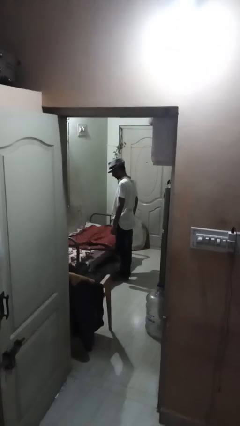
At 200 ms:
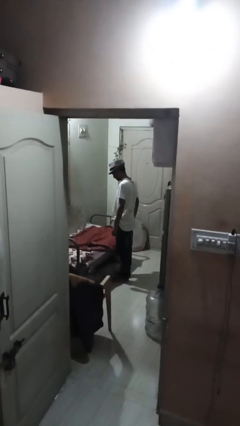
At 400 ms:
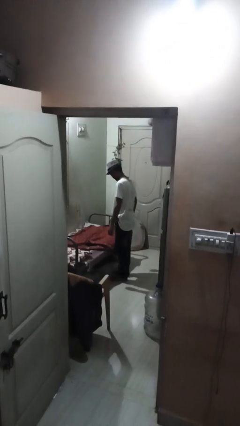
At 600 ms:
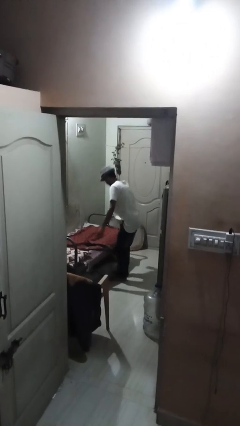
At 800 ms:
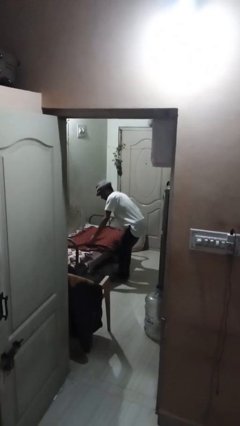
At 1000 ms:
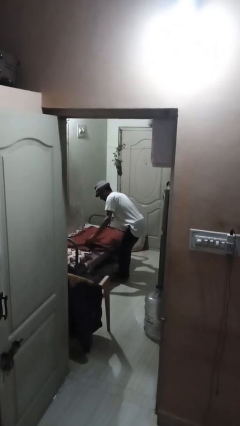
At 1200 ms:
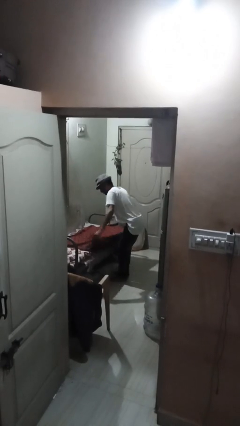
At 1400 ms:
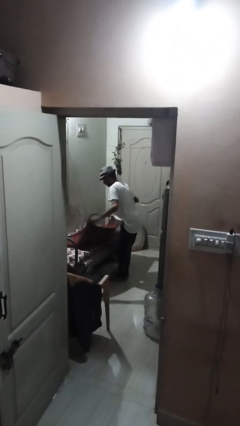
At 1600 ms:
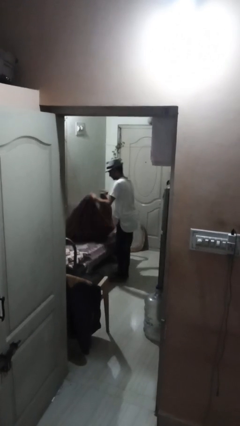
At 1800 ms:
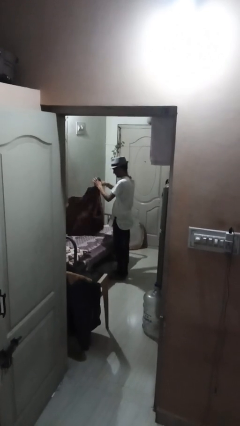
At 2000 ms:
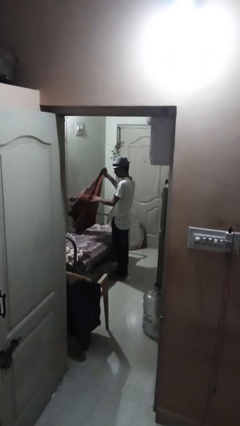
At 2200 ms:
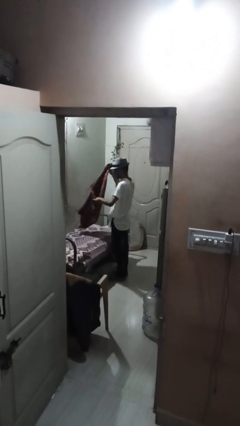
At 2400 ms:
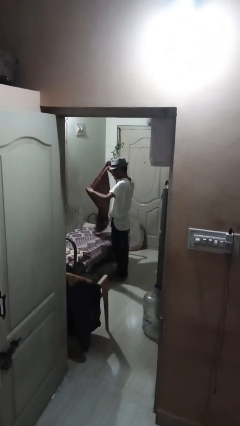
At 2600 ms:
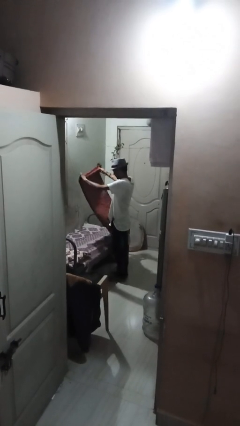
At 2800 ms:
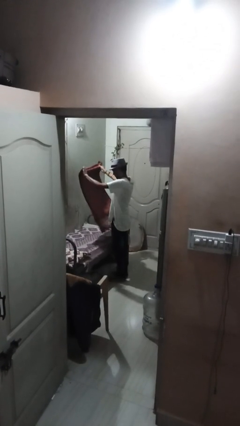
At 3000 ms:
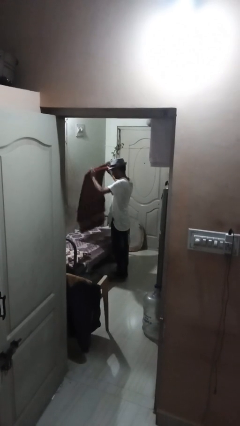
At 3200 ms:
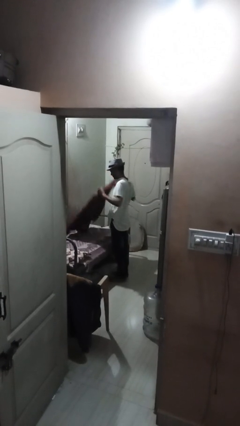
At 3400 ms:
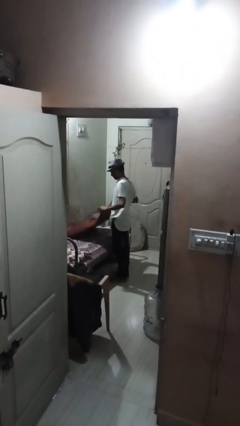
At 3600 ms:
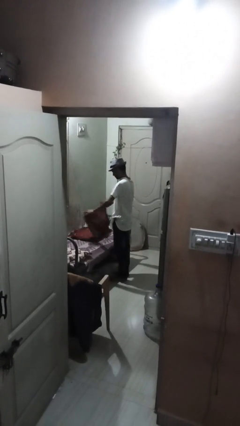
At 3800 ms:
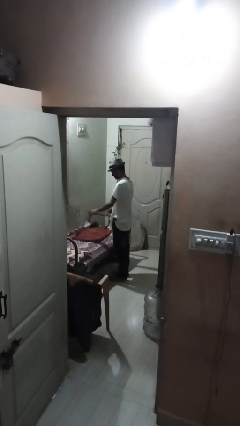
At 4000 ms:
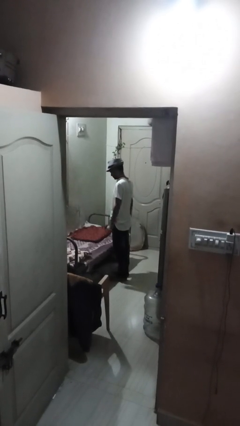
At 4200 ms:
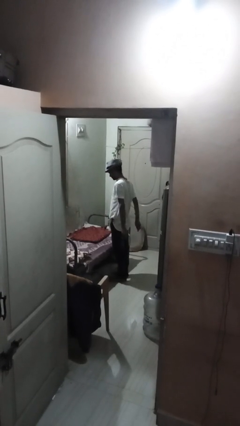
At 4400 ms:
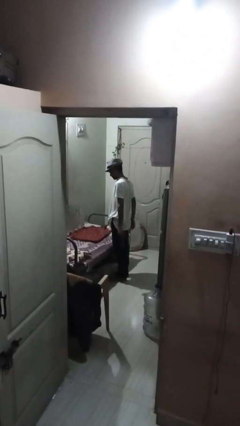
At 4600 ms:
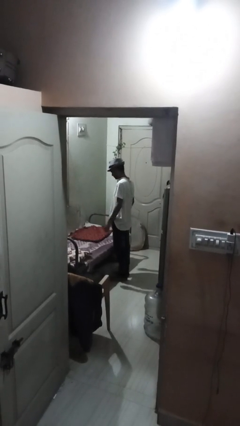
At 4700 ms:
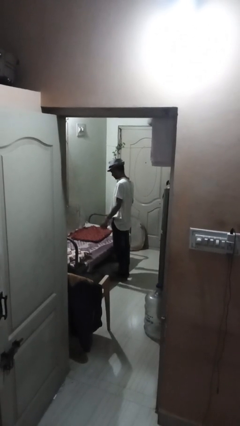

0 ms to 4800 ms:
person folds blanket

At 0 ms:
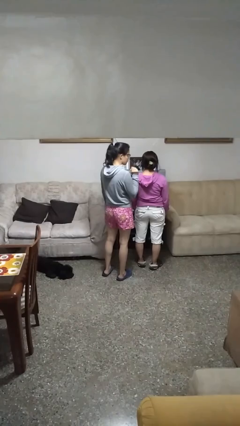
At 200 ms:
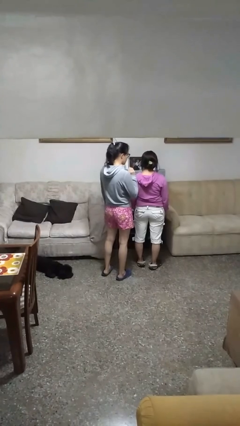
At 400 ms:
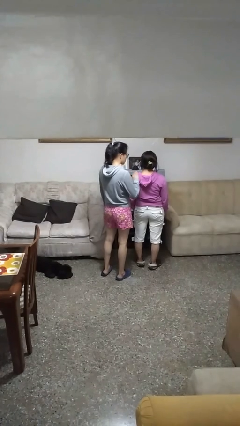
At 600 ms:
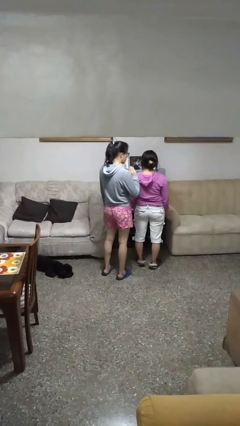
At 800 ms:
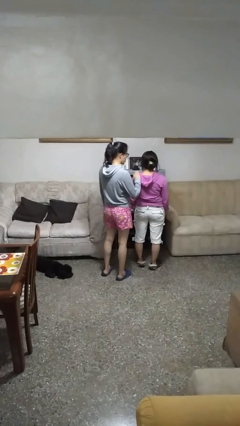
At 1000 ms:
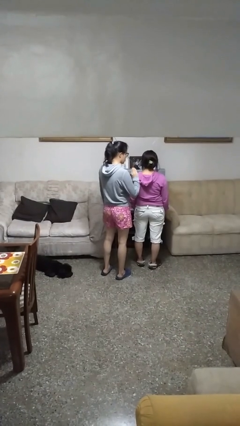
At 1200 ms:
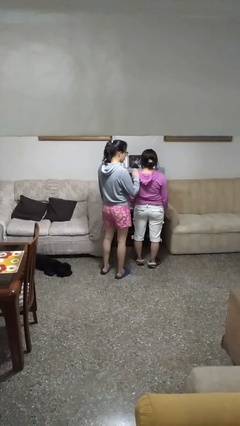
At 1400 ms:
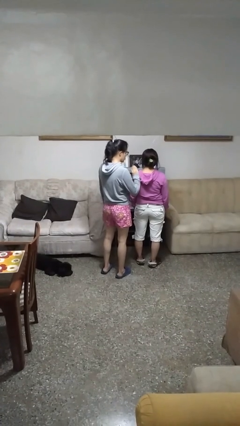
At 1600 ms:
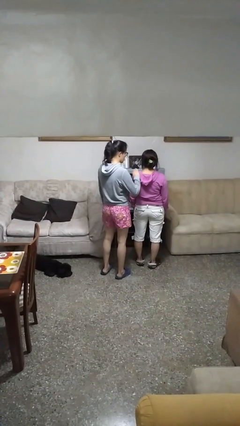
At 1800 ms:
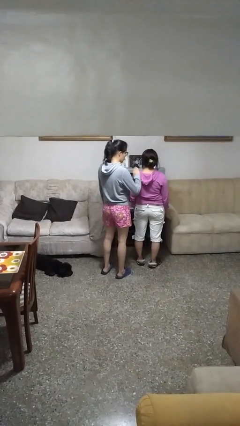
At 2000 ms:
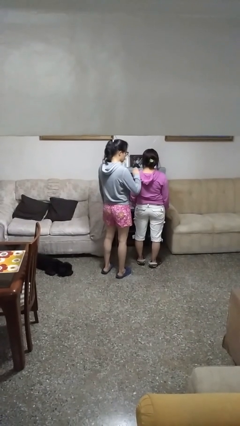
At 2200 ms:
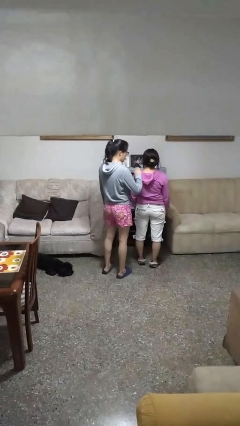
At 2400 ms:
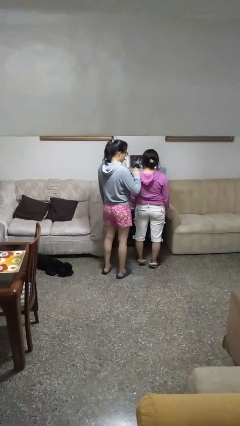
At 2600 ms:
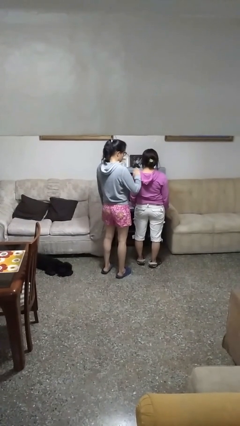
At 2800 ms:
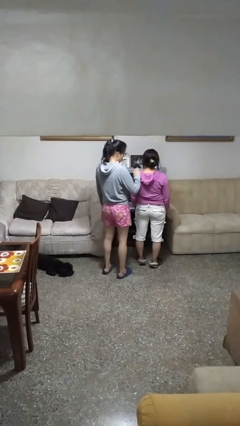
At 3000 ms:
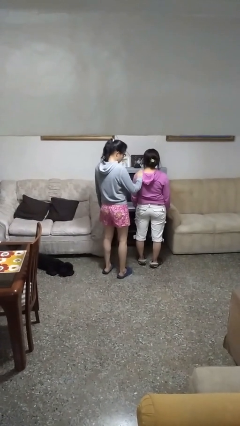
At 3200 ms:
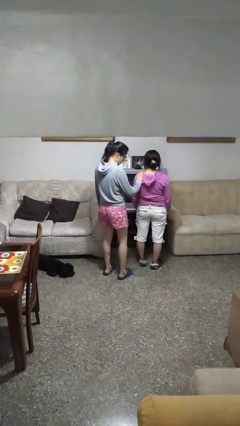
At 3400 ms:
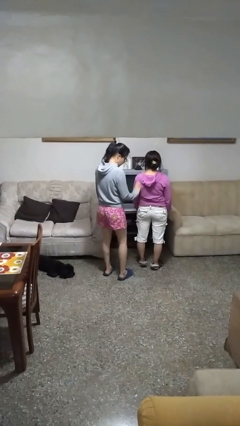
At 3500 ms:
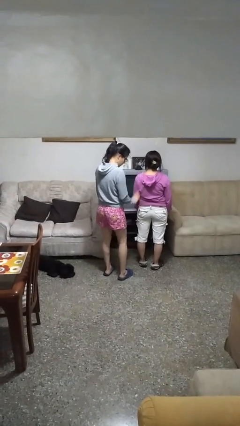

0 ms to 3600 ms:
person touches back of person

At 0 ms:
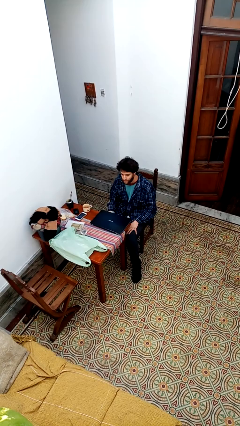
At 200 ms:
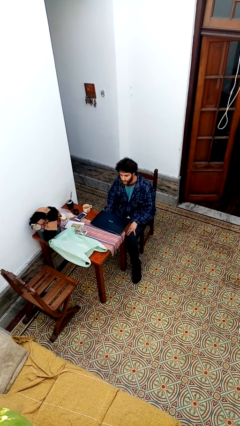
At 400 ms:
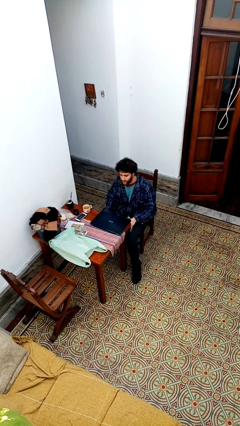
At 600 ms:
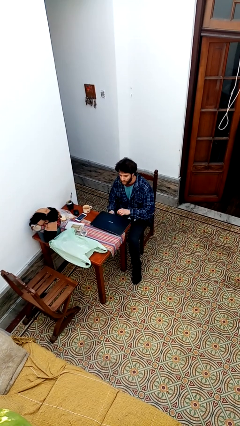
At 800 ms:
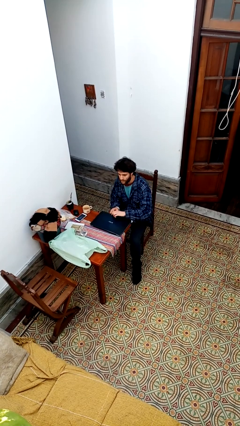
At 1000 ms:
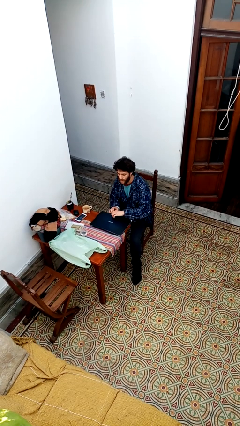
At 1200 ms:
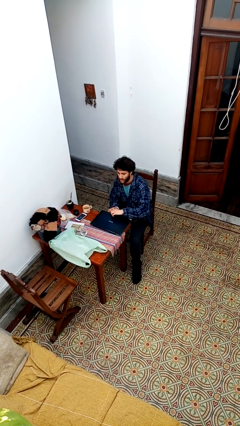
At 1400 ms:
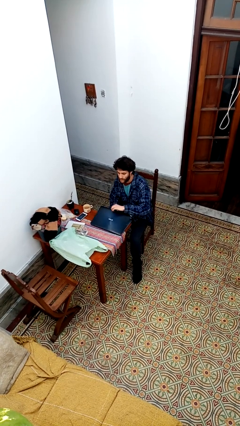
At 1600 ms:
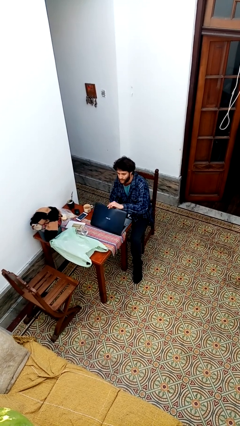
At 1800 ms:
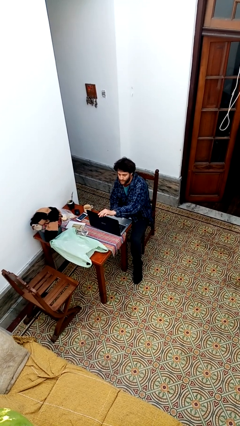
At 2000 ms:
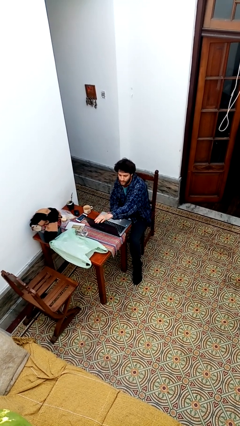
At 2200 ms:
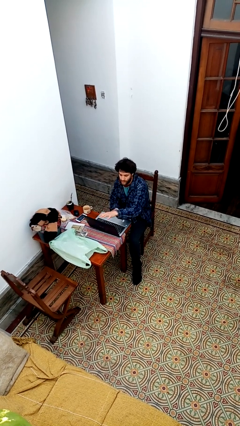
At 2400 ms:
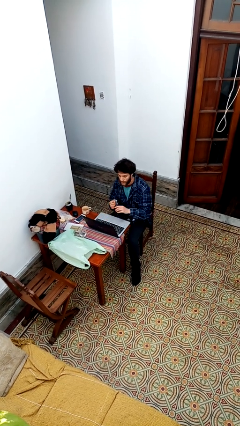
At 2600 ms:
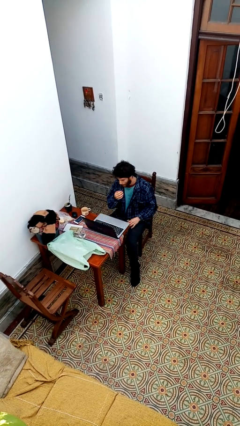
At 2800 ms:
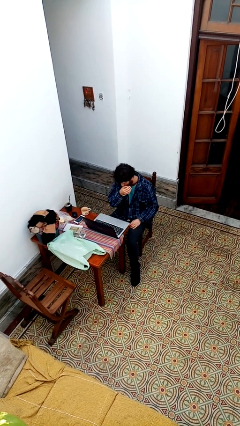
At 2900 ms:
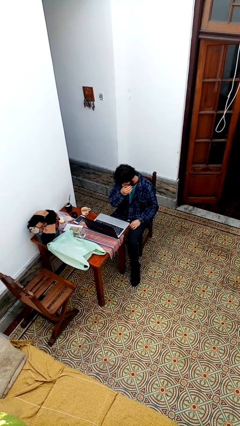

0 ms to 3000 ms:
person opens laptop

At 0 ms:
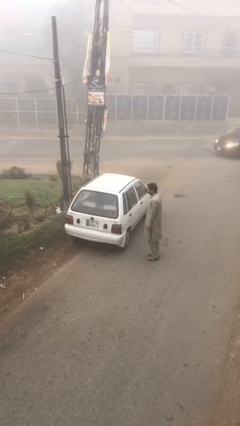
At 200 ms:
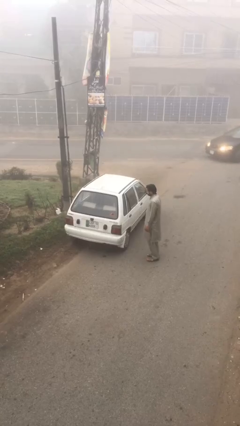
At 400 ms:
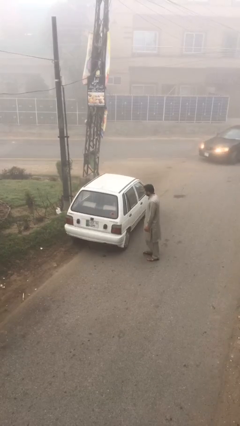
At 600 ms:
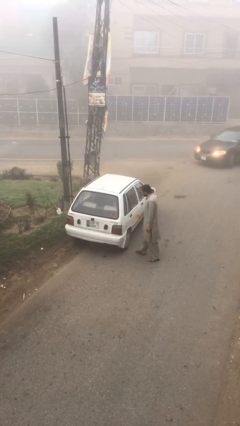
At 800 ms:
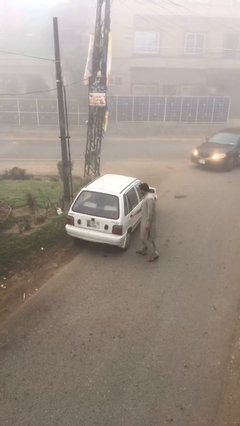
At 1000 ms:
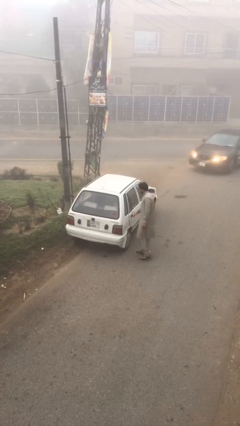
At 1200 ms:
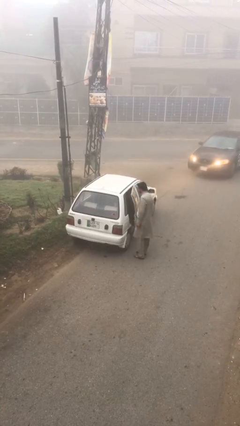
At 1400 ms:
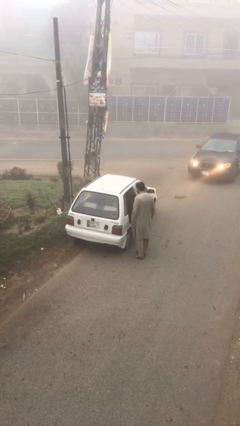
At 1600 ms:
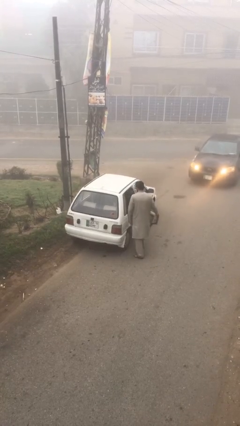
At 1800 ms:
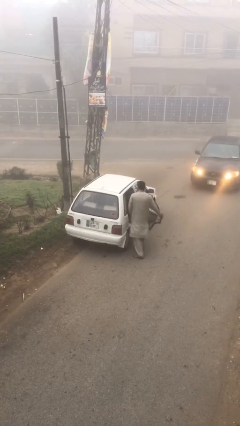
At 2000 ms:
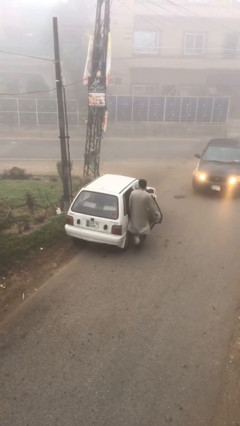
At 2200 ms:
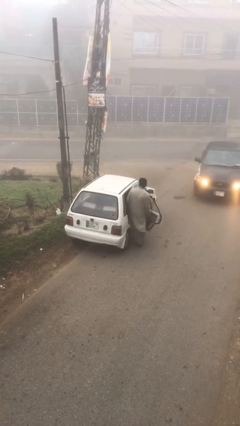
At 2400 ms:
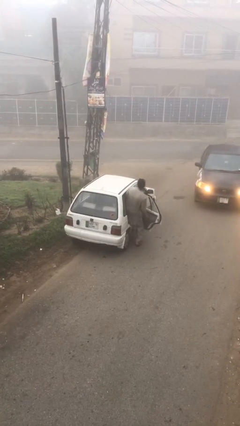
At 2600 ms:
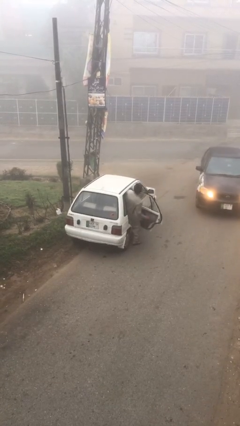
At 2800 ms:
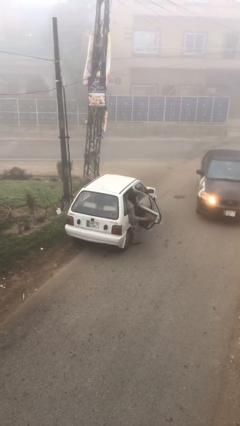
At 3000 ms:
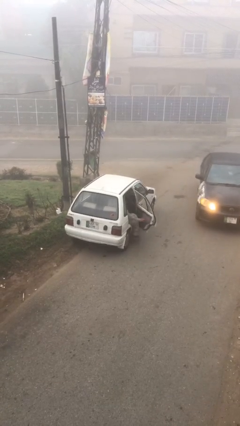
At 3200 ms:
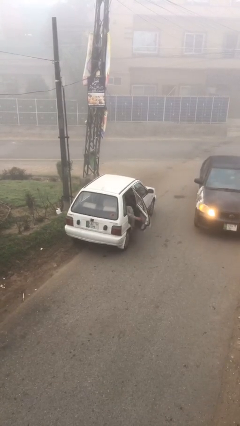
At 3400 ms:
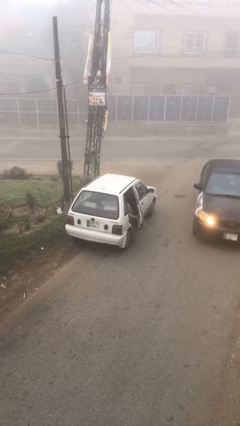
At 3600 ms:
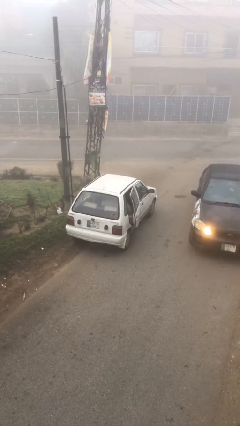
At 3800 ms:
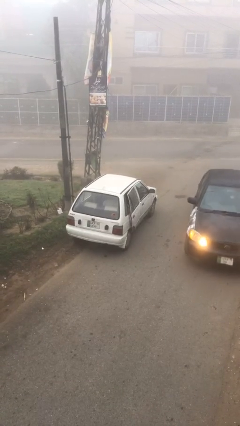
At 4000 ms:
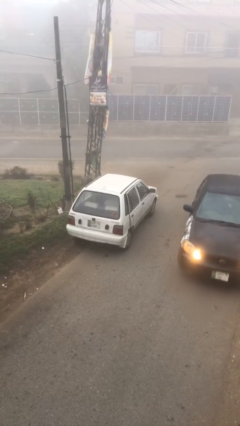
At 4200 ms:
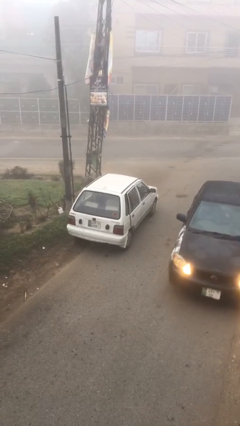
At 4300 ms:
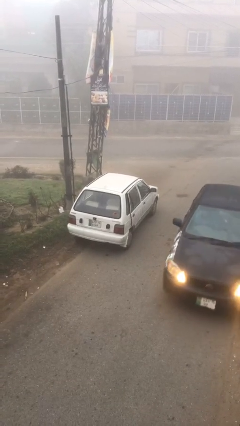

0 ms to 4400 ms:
car picks up person

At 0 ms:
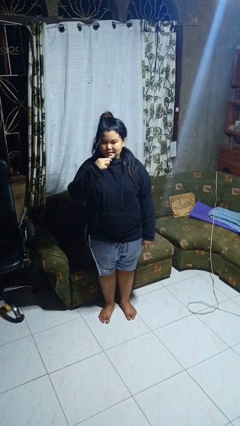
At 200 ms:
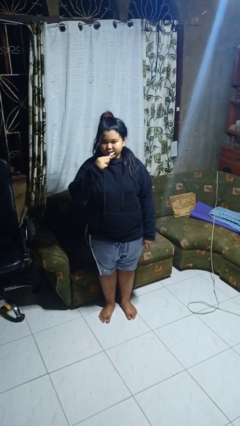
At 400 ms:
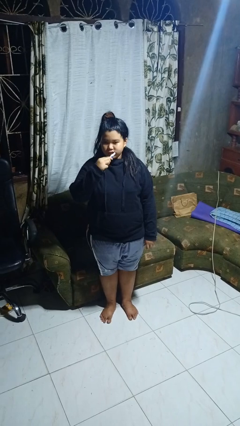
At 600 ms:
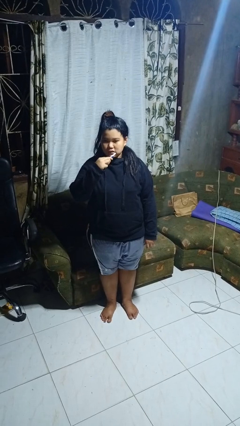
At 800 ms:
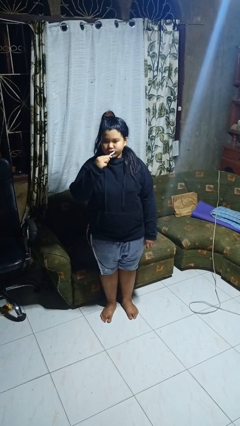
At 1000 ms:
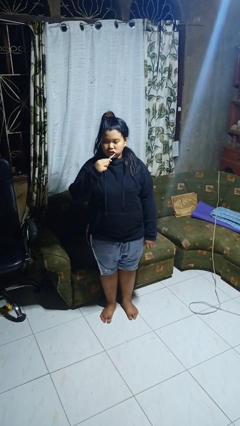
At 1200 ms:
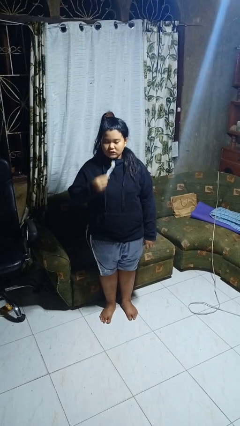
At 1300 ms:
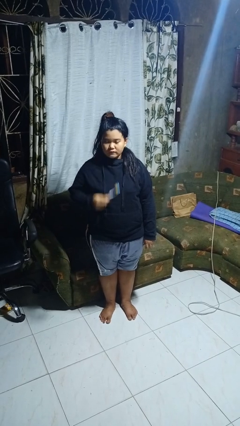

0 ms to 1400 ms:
person brushes teeth

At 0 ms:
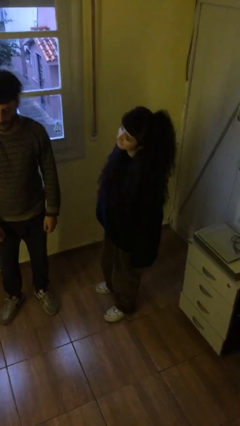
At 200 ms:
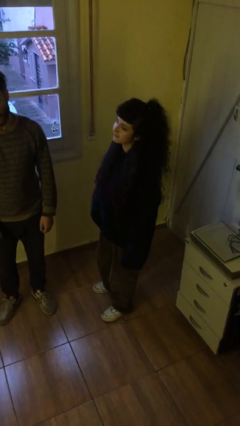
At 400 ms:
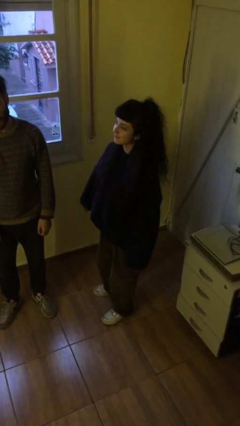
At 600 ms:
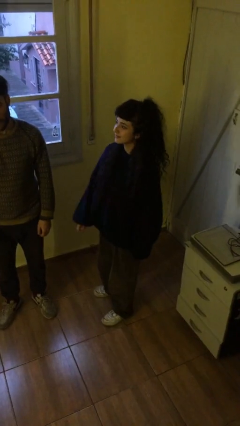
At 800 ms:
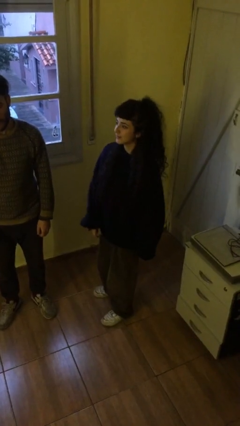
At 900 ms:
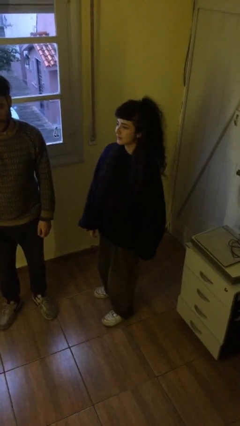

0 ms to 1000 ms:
person grabs person by hair
